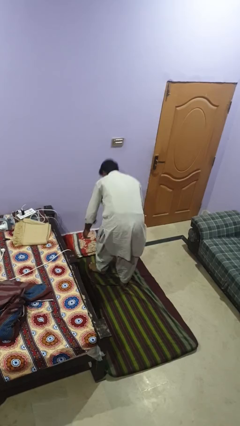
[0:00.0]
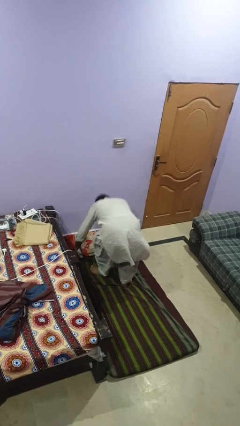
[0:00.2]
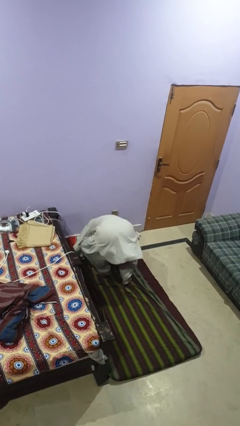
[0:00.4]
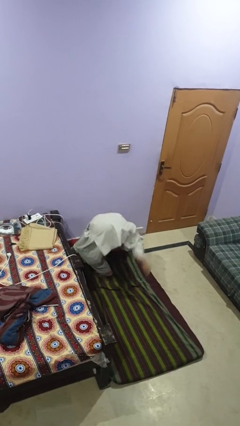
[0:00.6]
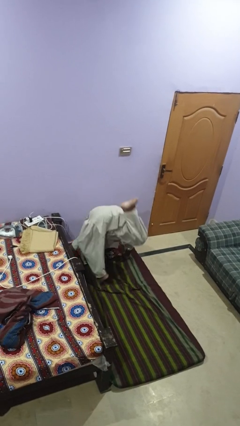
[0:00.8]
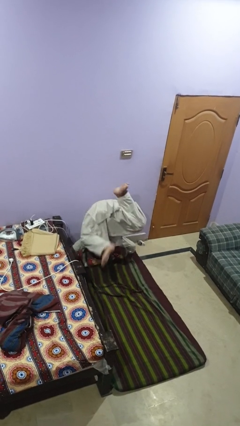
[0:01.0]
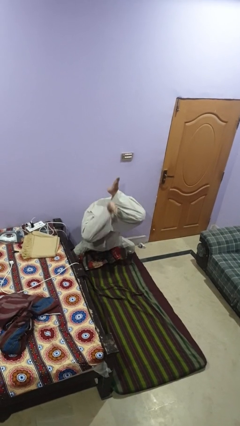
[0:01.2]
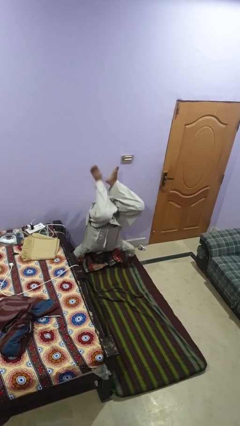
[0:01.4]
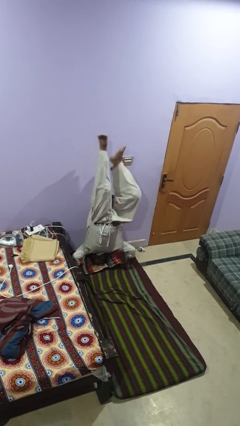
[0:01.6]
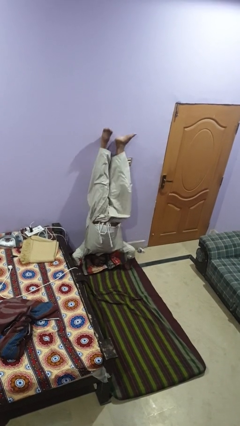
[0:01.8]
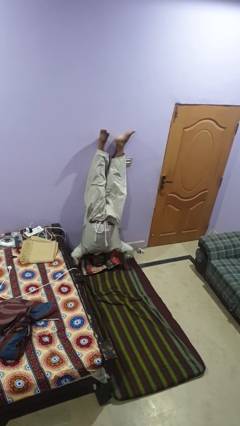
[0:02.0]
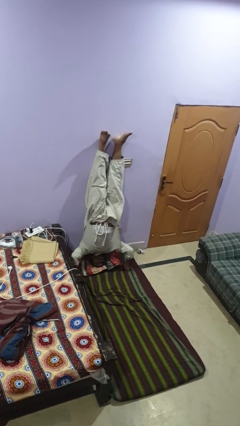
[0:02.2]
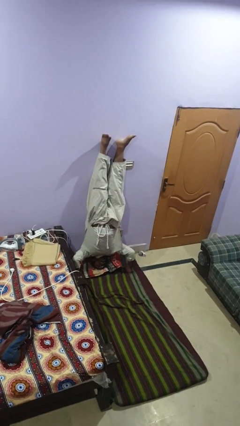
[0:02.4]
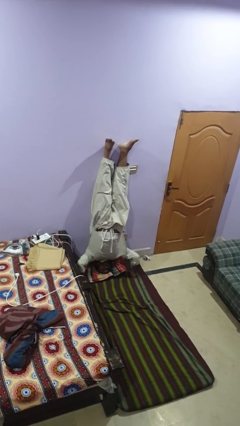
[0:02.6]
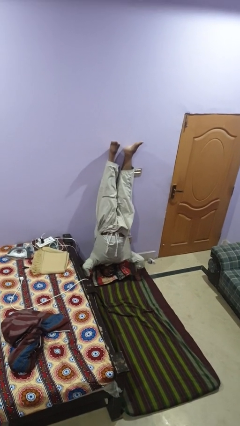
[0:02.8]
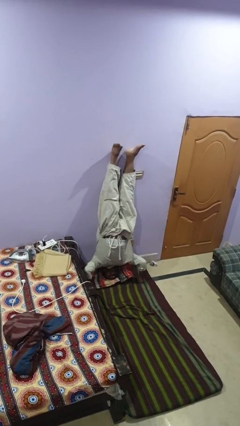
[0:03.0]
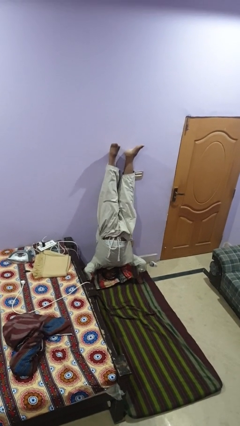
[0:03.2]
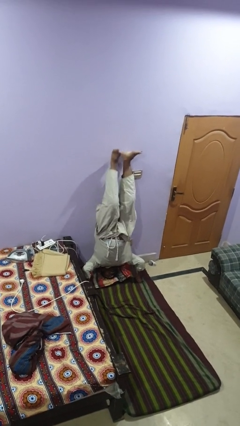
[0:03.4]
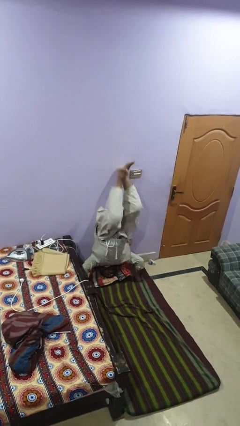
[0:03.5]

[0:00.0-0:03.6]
person handstand

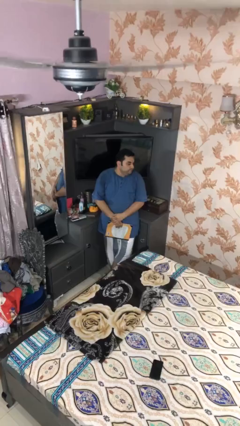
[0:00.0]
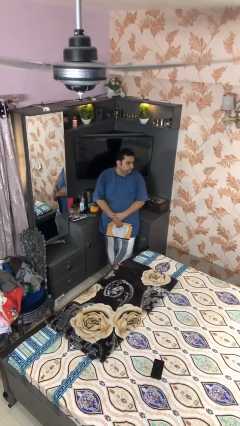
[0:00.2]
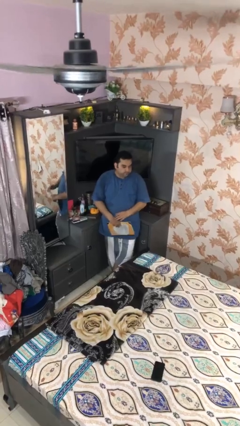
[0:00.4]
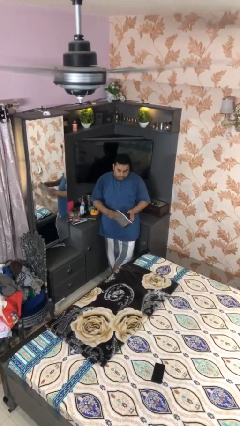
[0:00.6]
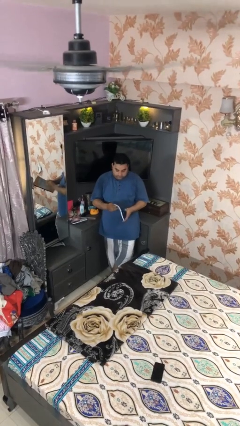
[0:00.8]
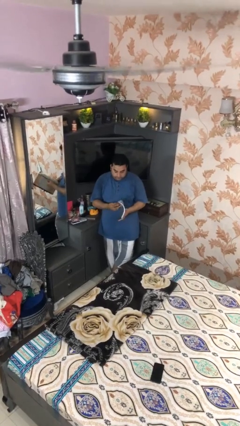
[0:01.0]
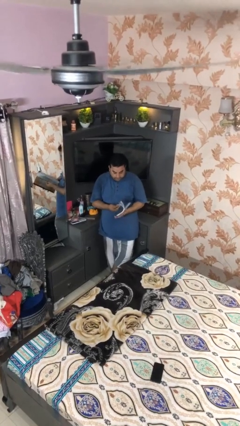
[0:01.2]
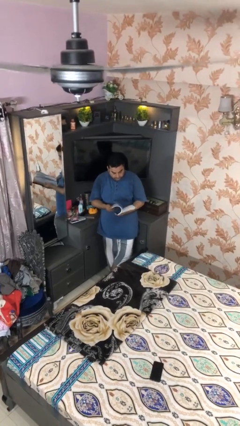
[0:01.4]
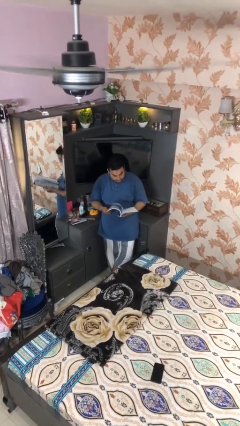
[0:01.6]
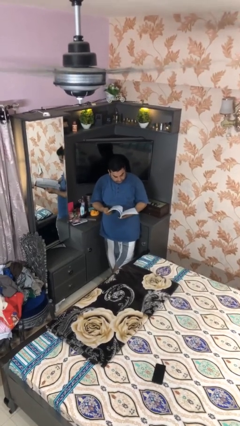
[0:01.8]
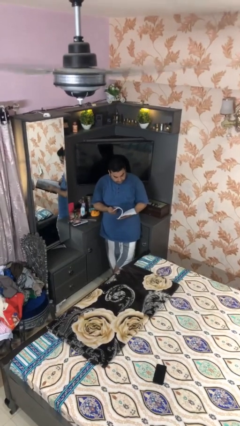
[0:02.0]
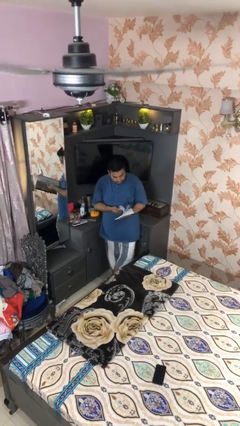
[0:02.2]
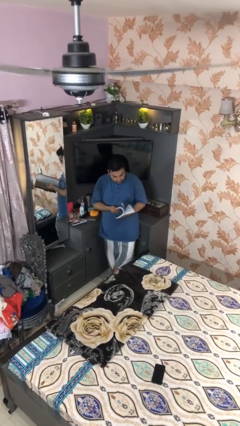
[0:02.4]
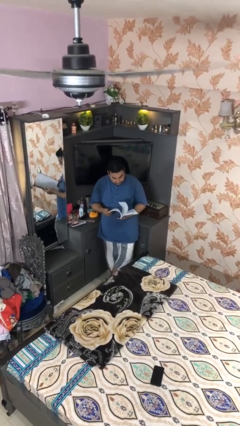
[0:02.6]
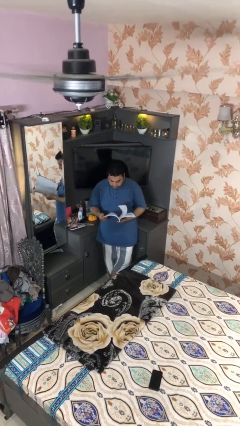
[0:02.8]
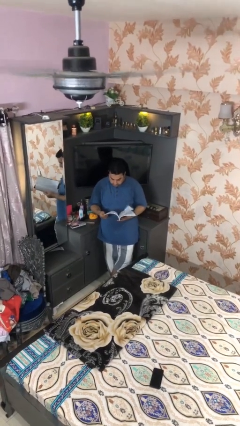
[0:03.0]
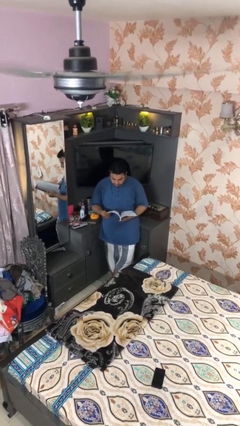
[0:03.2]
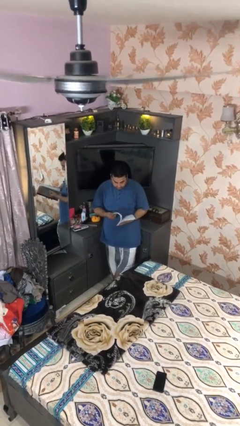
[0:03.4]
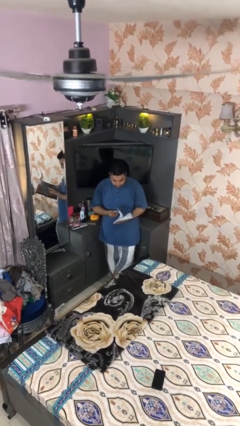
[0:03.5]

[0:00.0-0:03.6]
person reads book

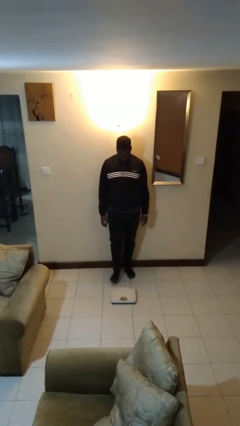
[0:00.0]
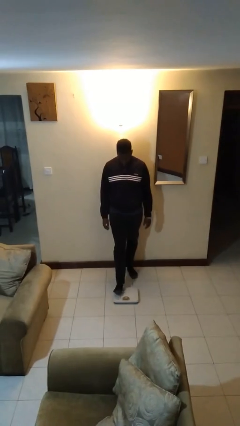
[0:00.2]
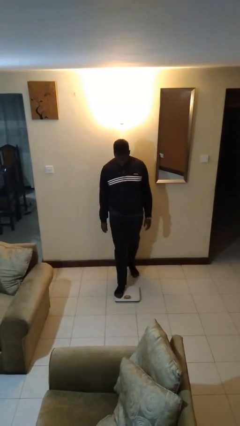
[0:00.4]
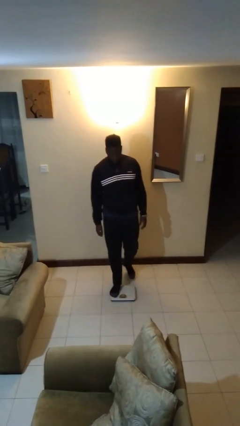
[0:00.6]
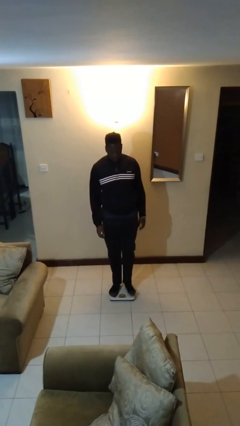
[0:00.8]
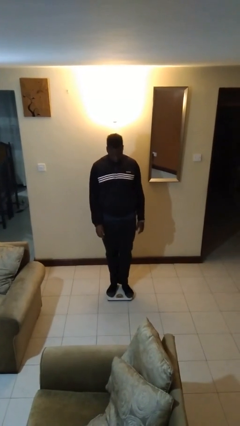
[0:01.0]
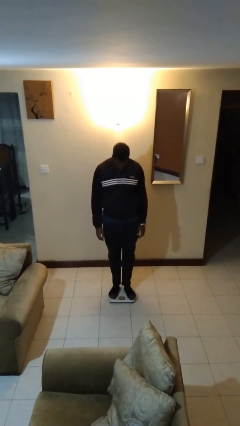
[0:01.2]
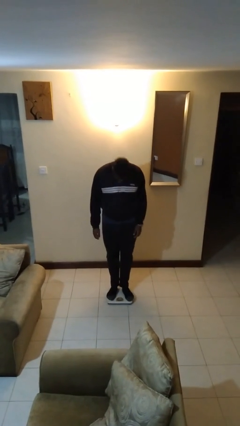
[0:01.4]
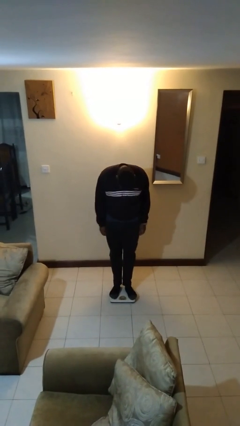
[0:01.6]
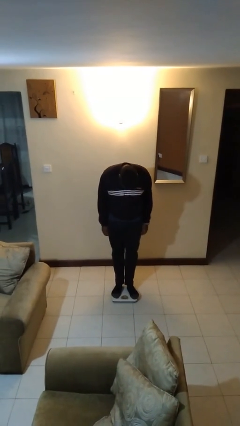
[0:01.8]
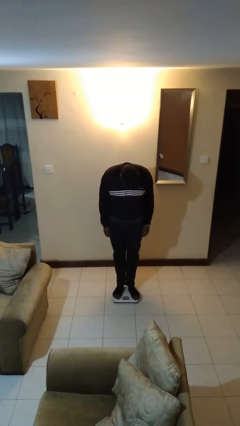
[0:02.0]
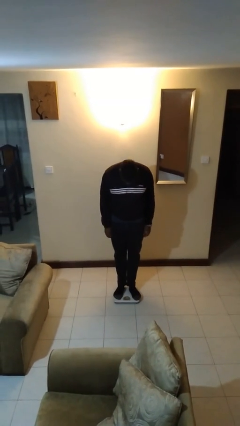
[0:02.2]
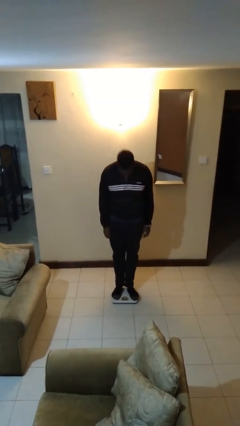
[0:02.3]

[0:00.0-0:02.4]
person uses bodyweight scale

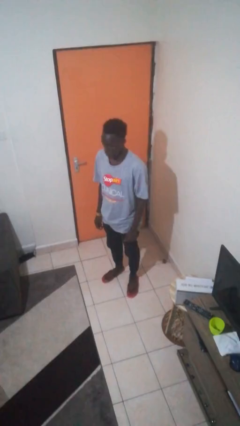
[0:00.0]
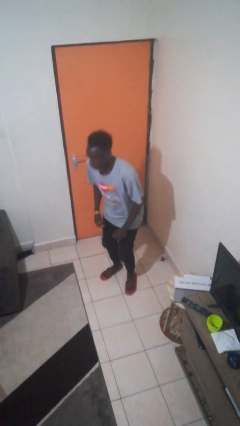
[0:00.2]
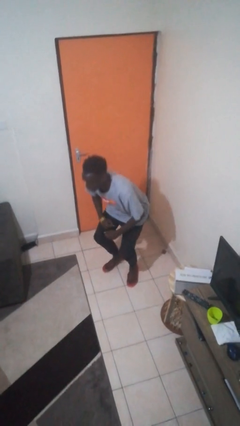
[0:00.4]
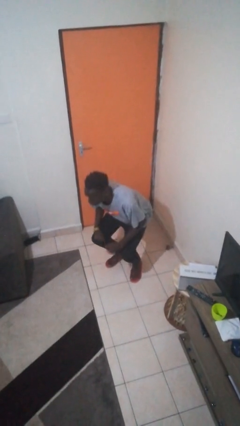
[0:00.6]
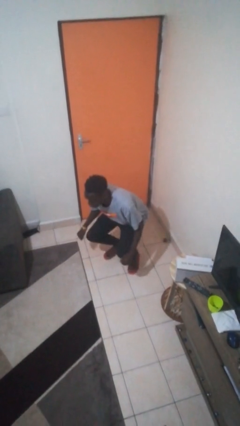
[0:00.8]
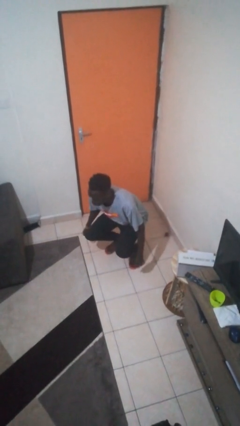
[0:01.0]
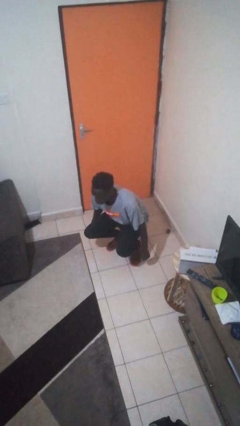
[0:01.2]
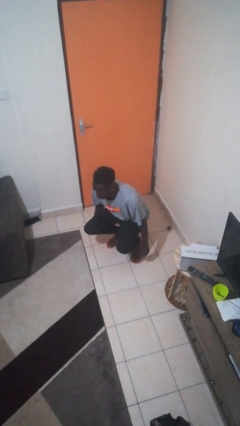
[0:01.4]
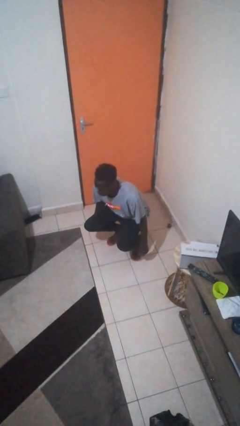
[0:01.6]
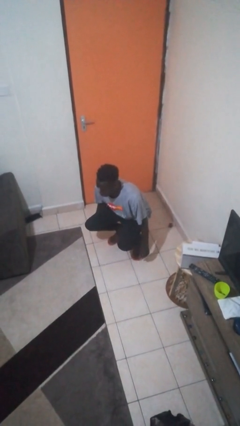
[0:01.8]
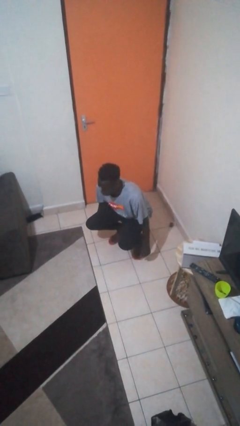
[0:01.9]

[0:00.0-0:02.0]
person squats

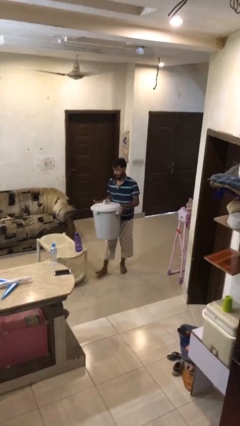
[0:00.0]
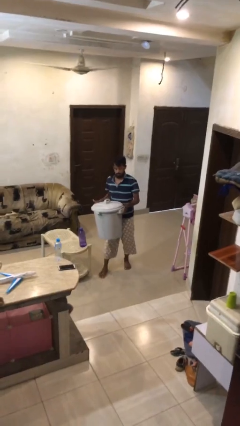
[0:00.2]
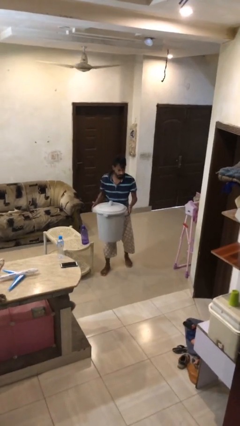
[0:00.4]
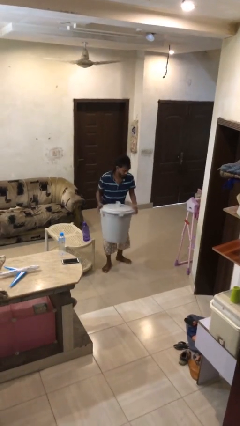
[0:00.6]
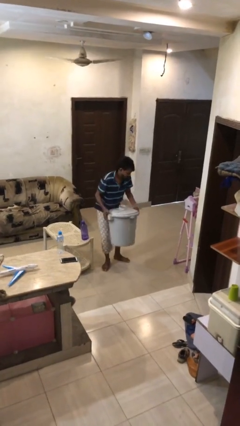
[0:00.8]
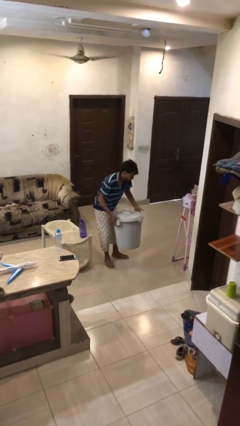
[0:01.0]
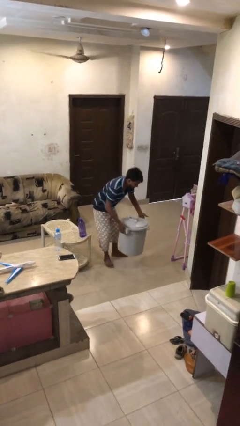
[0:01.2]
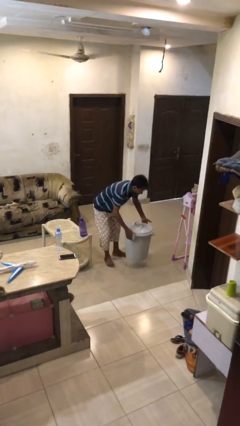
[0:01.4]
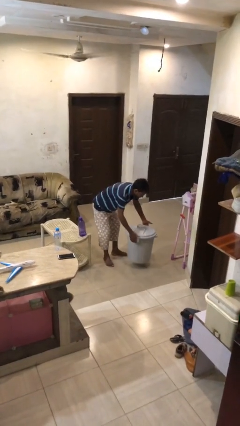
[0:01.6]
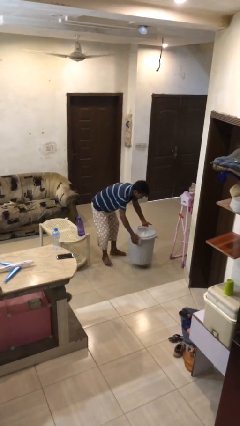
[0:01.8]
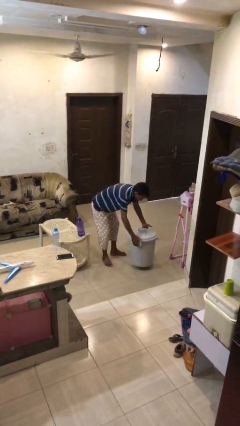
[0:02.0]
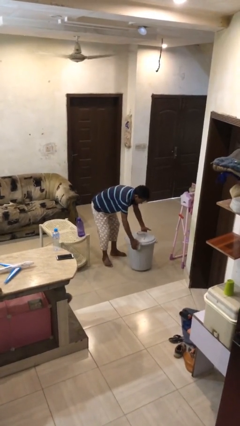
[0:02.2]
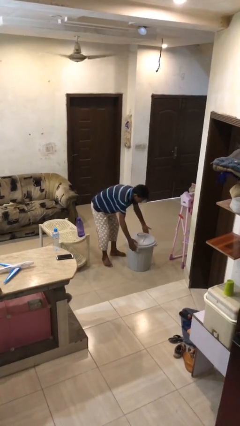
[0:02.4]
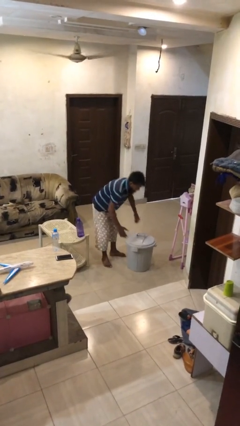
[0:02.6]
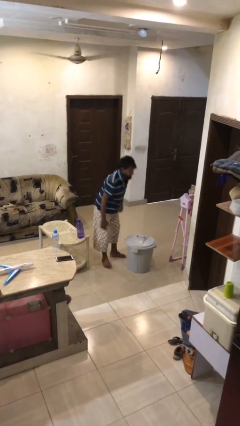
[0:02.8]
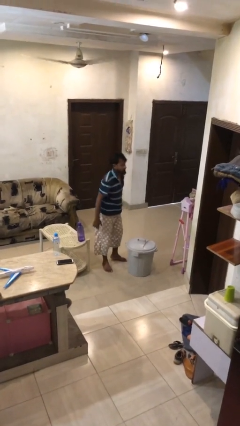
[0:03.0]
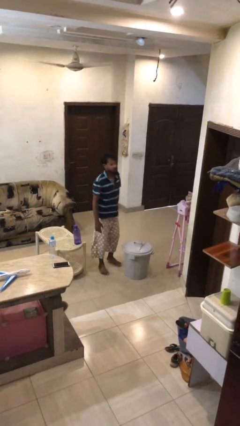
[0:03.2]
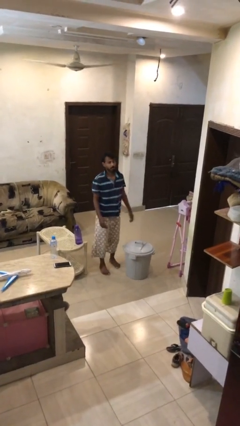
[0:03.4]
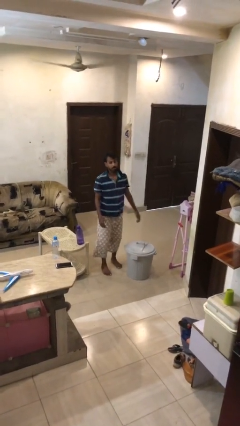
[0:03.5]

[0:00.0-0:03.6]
person puts down object on floor

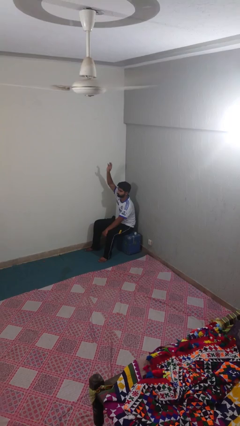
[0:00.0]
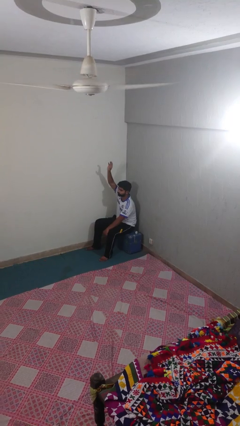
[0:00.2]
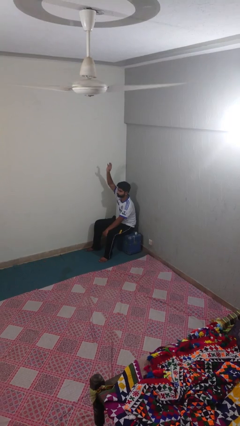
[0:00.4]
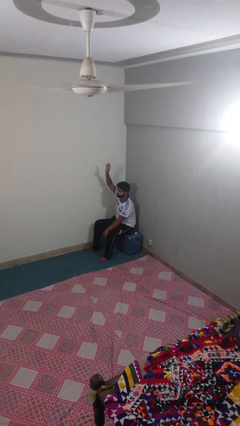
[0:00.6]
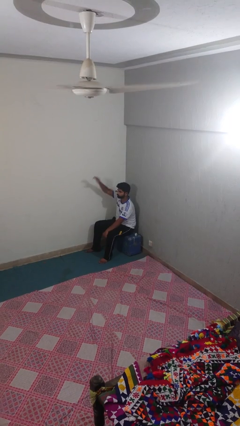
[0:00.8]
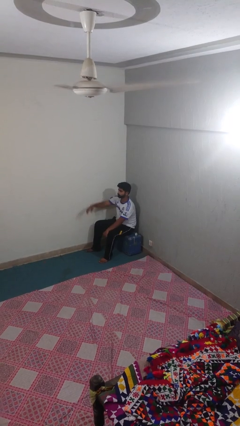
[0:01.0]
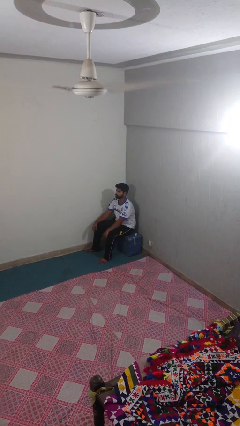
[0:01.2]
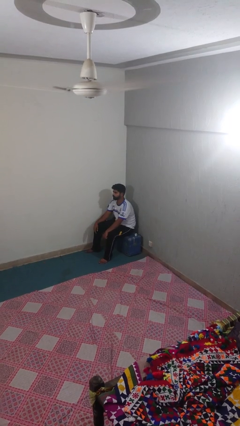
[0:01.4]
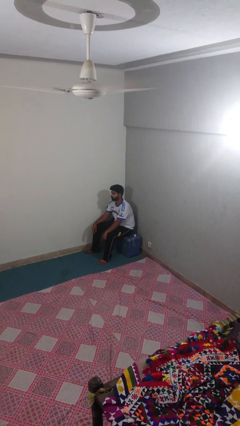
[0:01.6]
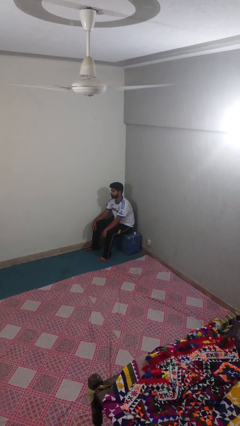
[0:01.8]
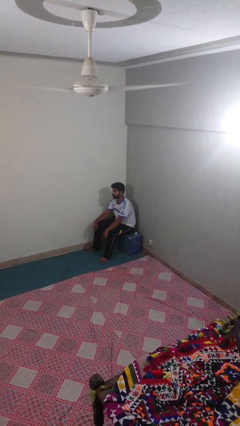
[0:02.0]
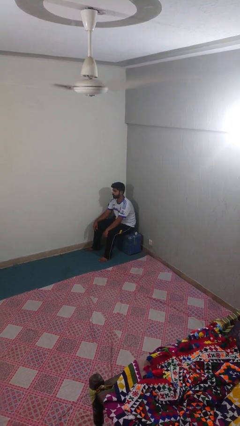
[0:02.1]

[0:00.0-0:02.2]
person gestures lower hand
